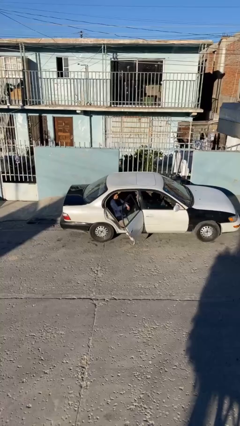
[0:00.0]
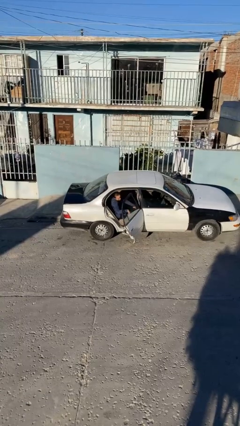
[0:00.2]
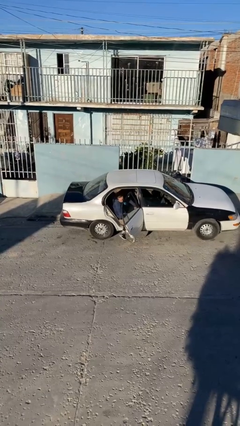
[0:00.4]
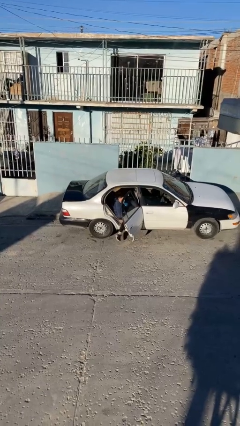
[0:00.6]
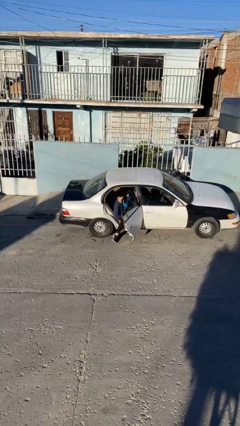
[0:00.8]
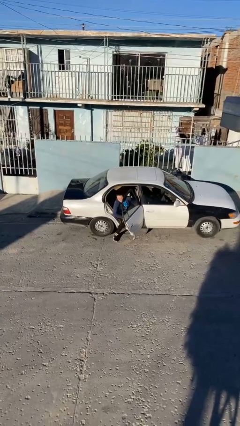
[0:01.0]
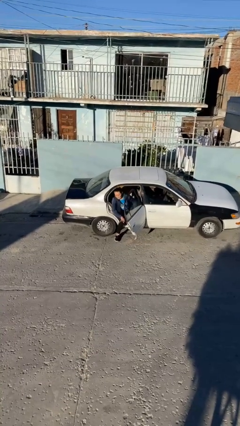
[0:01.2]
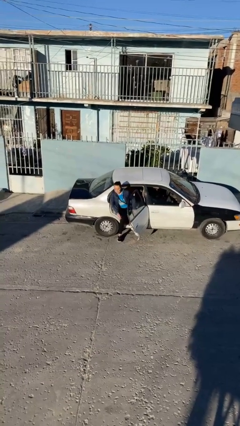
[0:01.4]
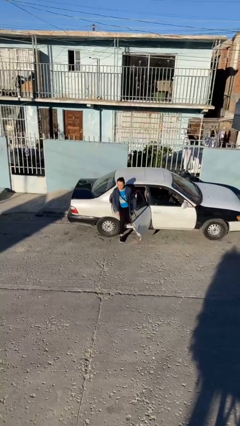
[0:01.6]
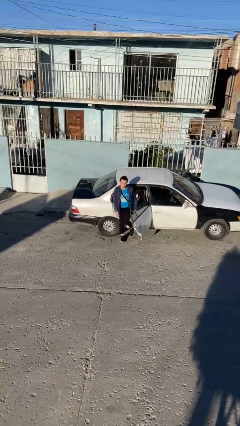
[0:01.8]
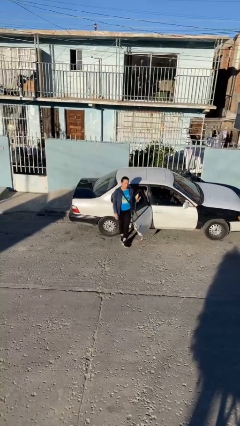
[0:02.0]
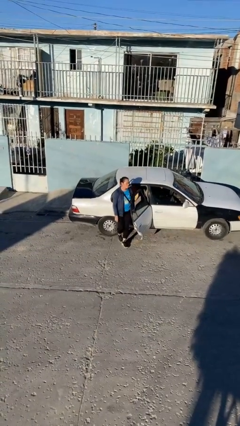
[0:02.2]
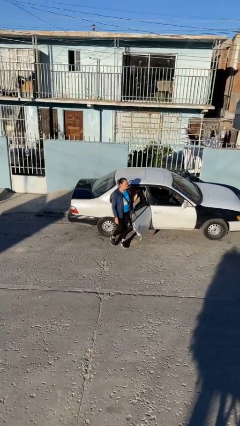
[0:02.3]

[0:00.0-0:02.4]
person exits car

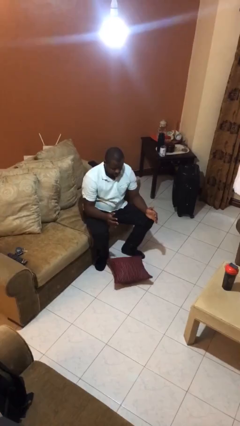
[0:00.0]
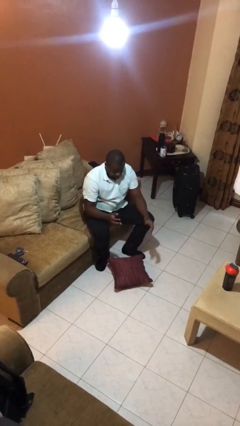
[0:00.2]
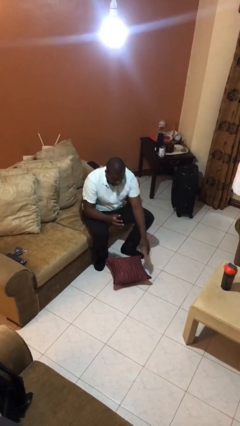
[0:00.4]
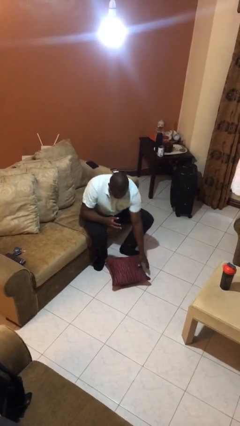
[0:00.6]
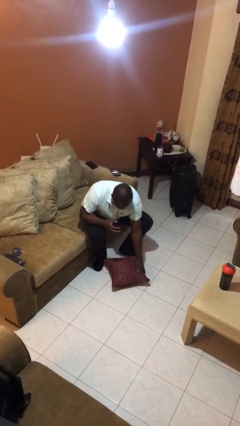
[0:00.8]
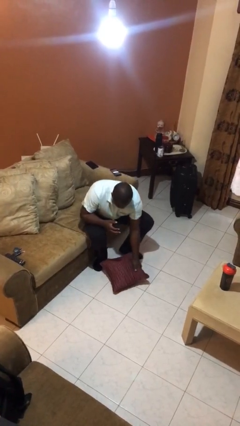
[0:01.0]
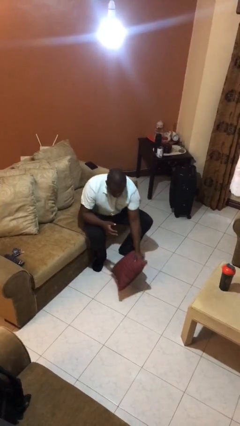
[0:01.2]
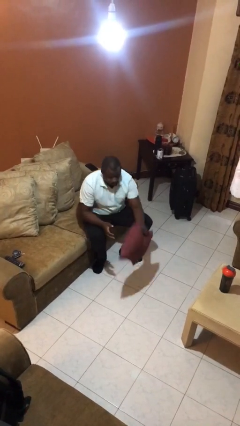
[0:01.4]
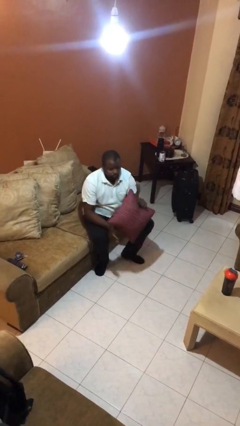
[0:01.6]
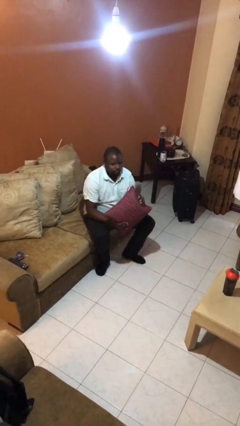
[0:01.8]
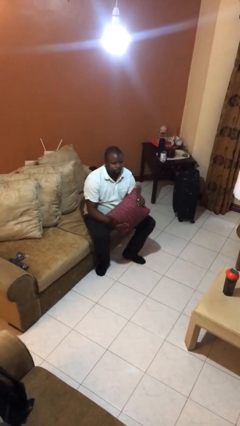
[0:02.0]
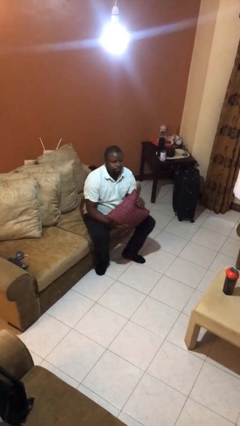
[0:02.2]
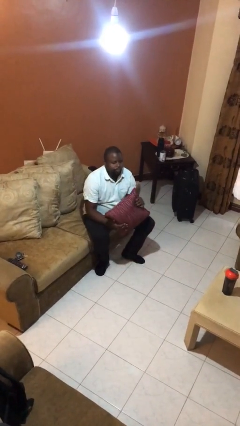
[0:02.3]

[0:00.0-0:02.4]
person picks up object from floor

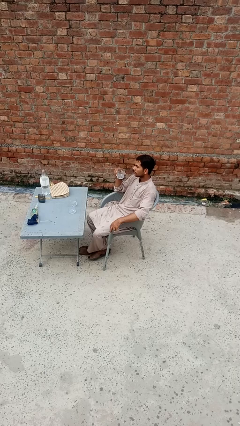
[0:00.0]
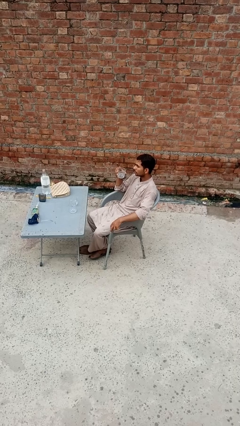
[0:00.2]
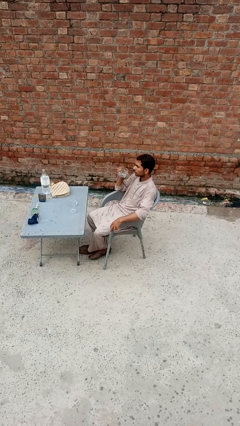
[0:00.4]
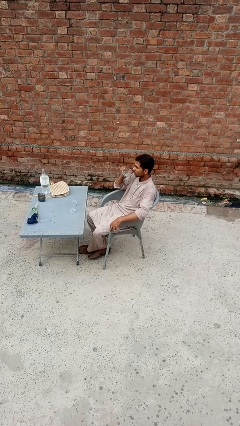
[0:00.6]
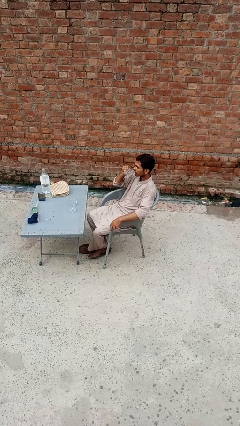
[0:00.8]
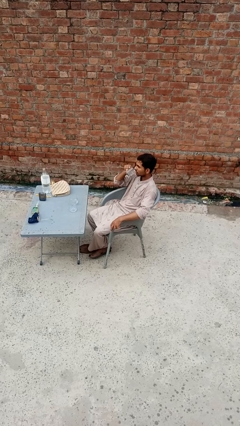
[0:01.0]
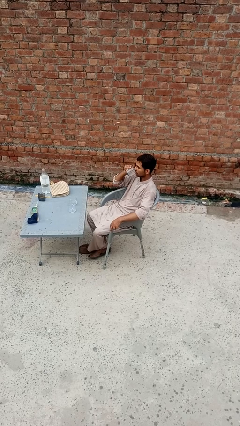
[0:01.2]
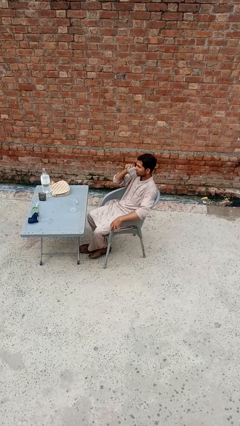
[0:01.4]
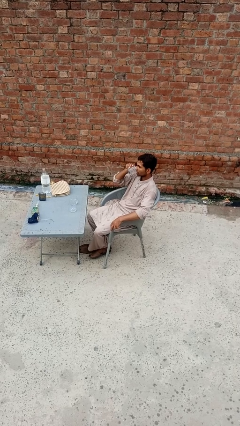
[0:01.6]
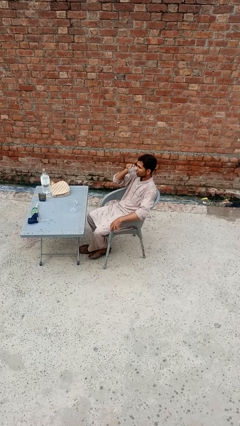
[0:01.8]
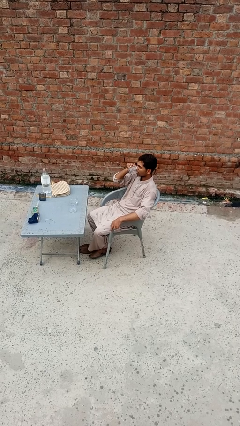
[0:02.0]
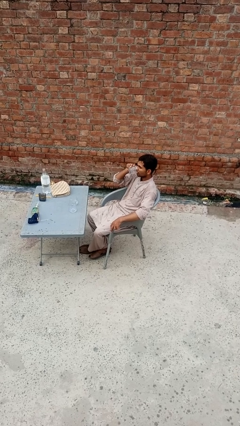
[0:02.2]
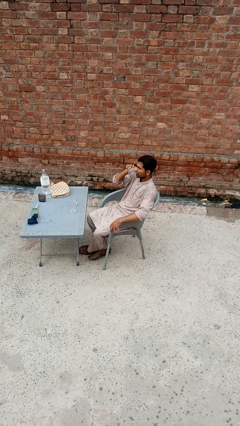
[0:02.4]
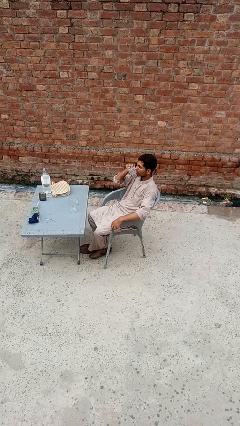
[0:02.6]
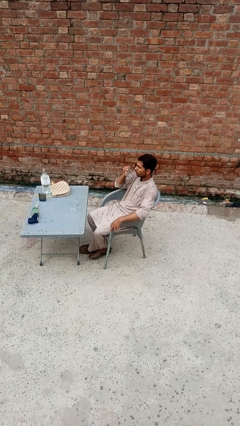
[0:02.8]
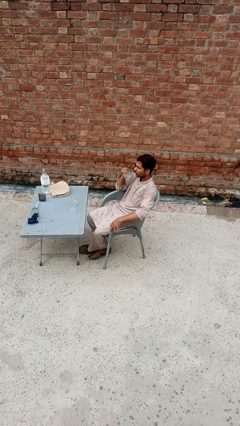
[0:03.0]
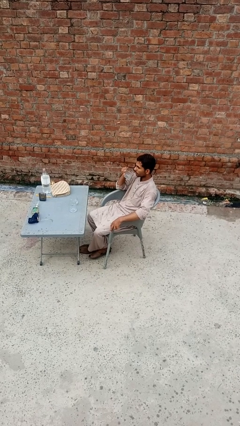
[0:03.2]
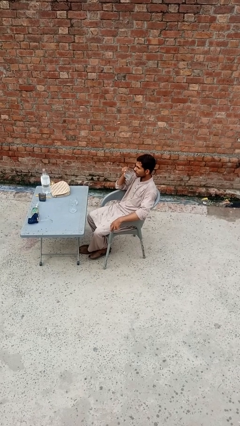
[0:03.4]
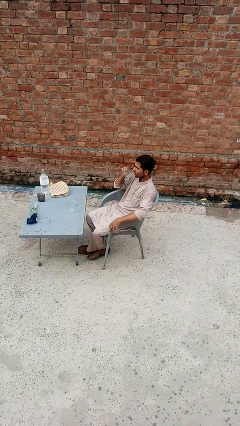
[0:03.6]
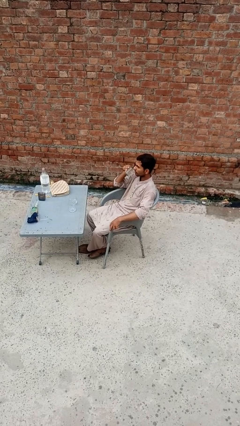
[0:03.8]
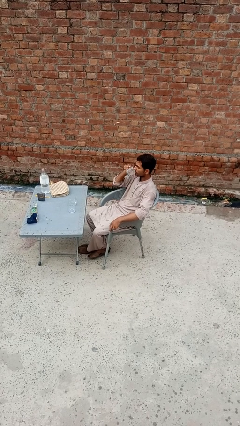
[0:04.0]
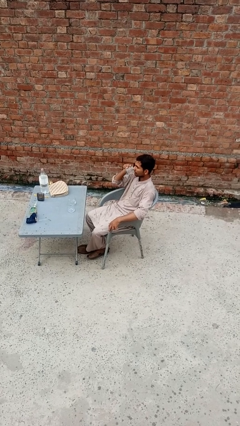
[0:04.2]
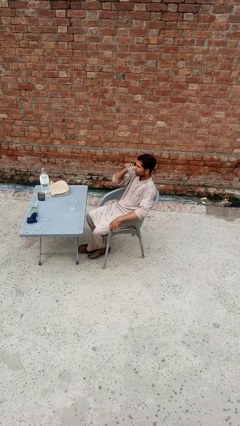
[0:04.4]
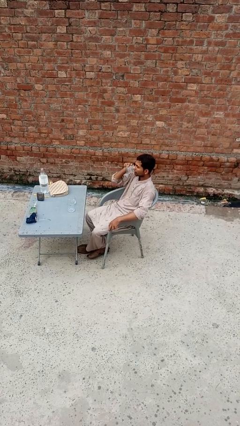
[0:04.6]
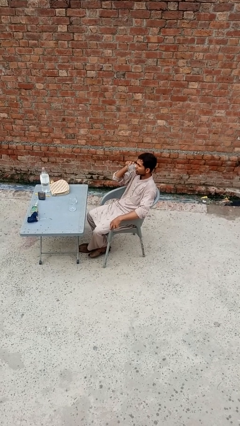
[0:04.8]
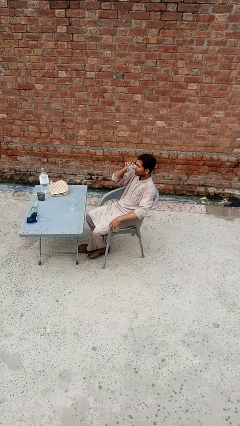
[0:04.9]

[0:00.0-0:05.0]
person drinks from shotglass

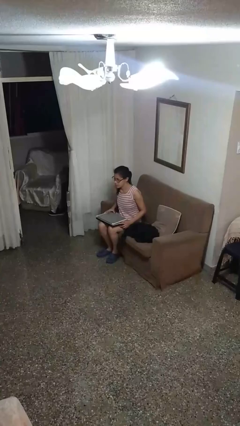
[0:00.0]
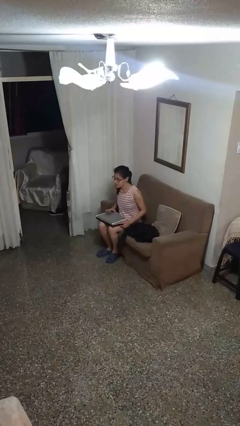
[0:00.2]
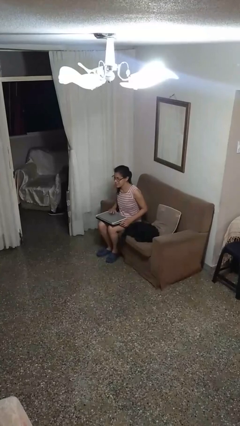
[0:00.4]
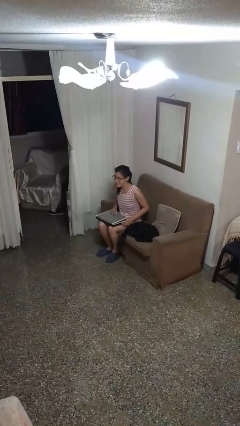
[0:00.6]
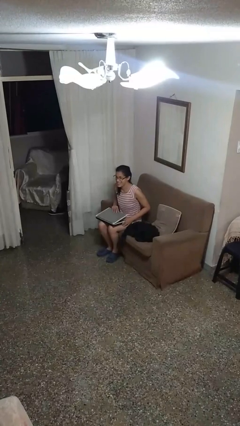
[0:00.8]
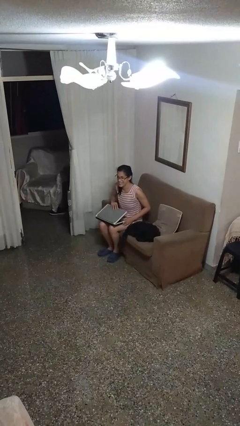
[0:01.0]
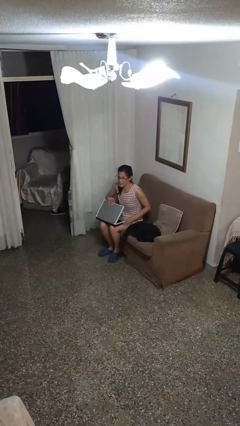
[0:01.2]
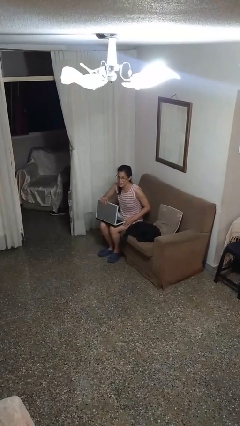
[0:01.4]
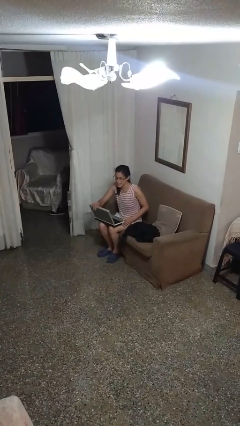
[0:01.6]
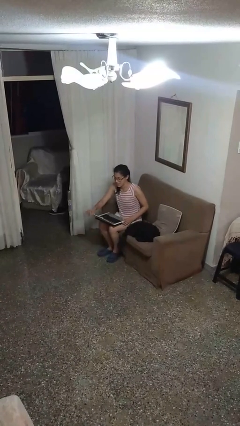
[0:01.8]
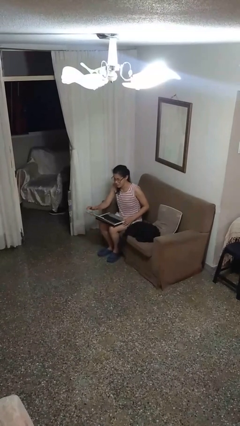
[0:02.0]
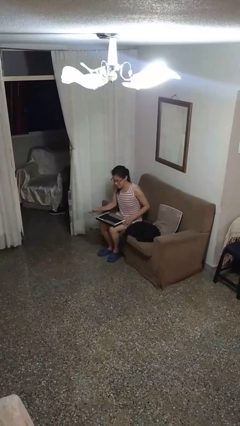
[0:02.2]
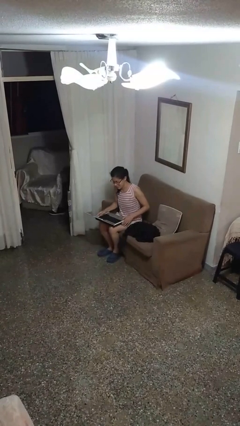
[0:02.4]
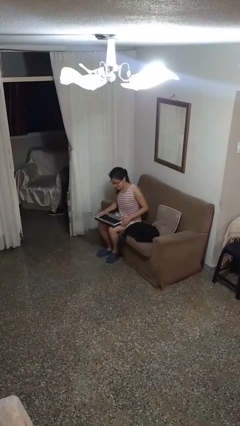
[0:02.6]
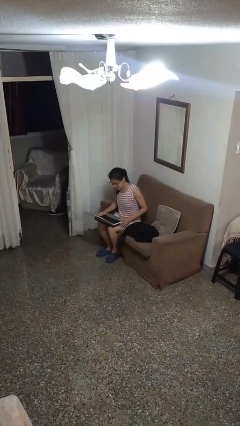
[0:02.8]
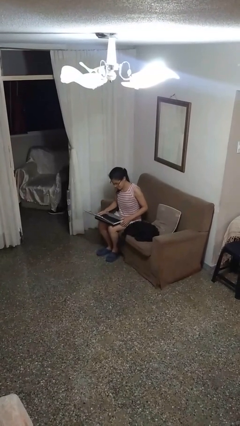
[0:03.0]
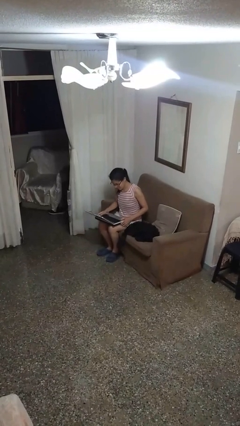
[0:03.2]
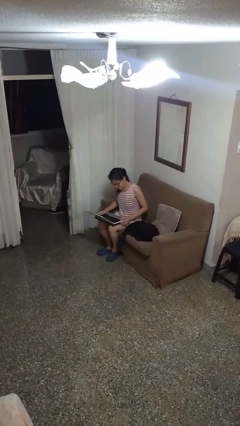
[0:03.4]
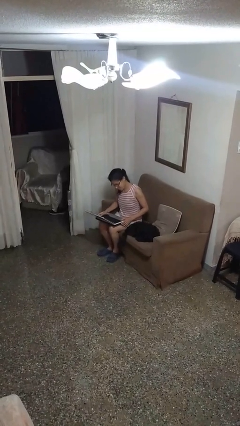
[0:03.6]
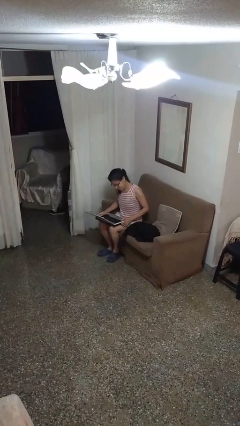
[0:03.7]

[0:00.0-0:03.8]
person opens laptop

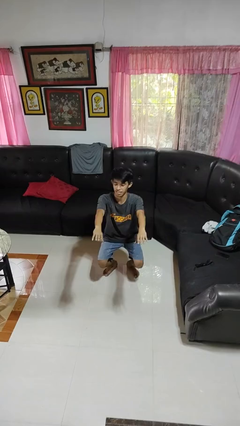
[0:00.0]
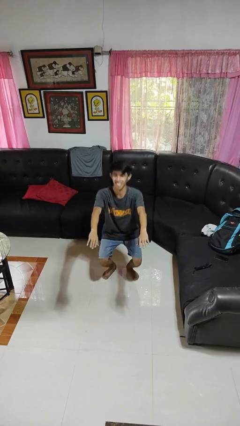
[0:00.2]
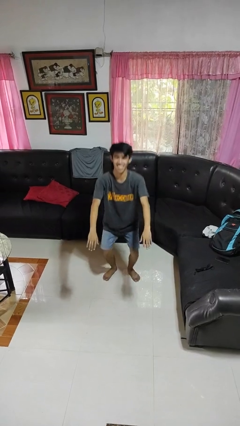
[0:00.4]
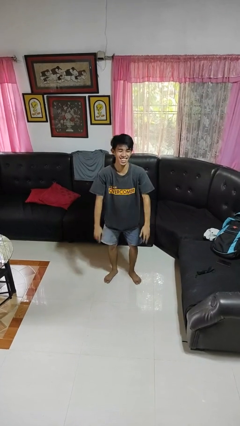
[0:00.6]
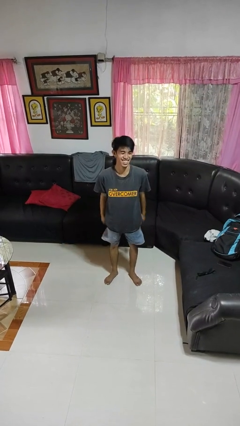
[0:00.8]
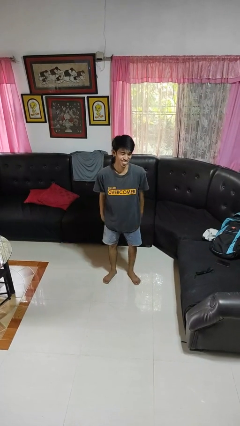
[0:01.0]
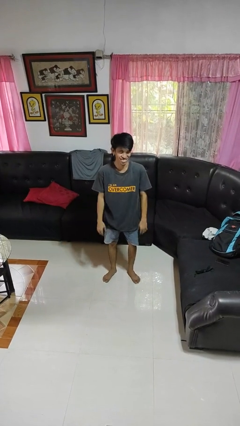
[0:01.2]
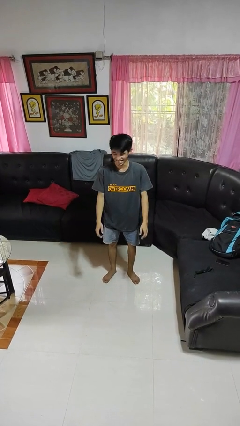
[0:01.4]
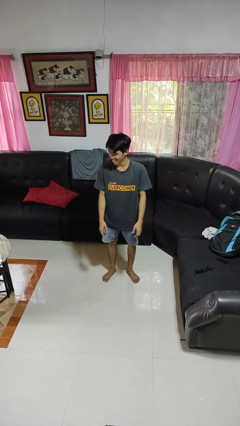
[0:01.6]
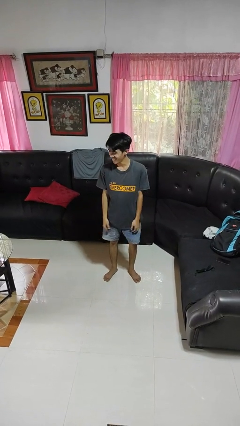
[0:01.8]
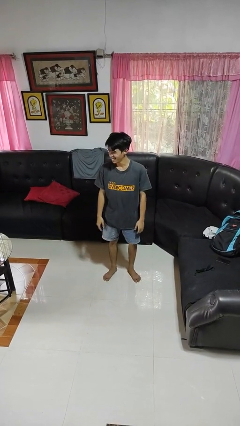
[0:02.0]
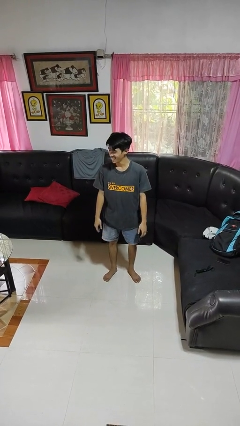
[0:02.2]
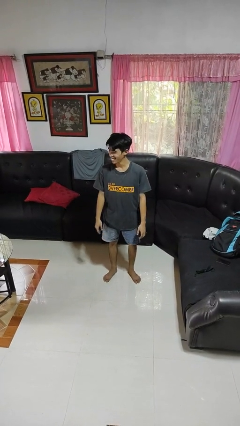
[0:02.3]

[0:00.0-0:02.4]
person stands up

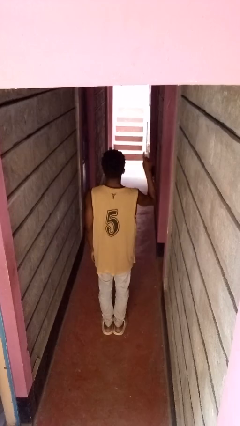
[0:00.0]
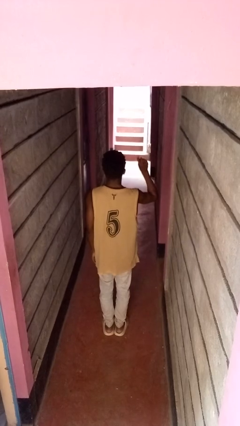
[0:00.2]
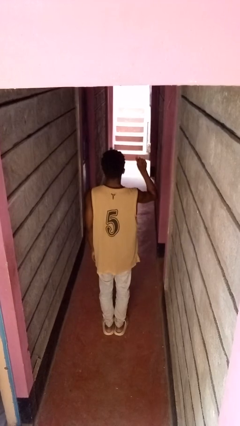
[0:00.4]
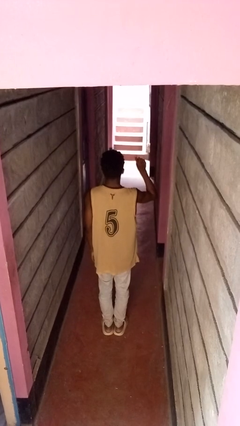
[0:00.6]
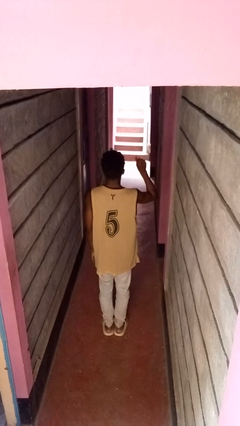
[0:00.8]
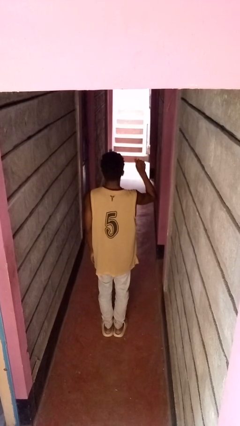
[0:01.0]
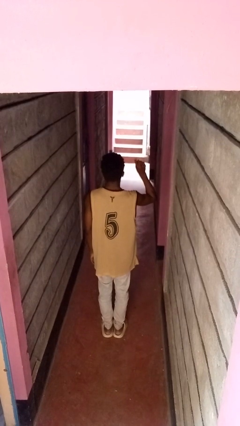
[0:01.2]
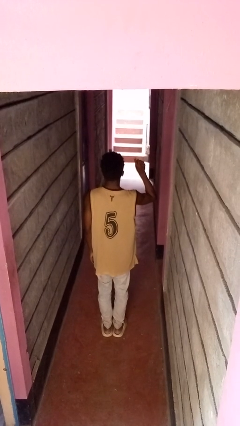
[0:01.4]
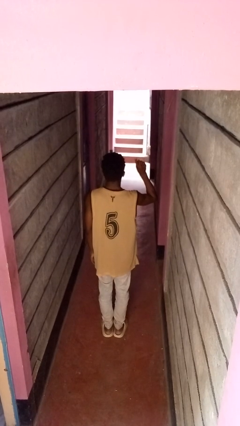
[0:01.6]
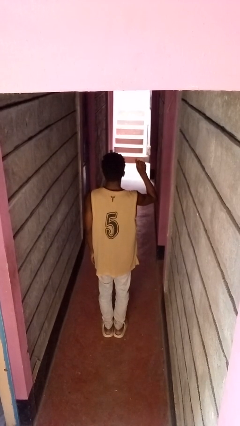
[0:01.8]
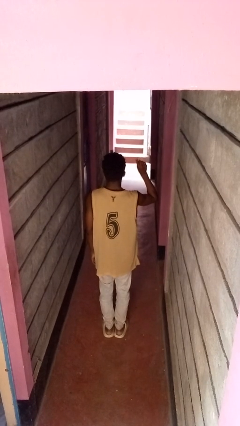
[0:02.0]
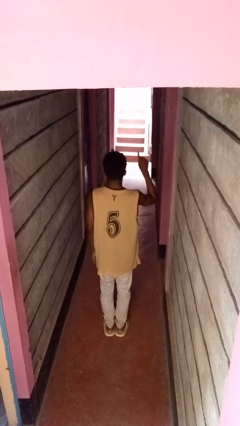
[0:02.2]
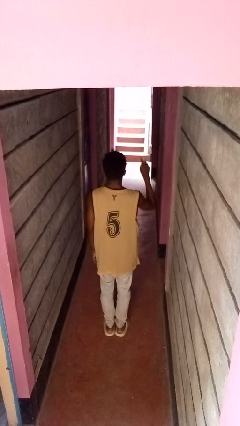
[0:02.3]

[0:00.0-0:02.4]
person gestures number one
